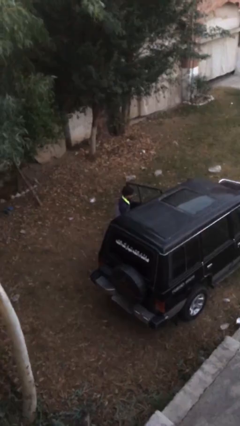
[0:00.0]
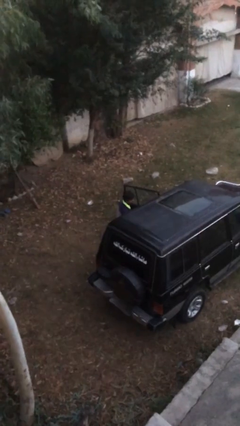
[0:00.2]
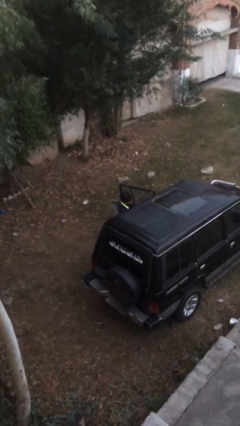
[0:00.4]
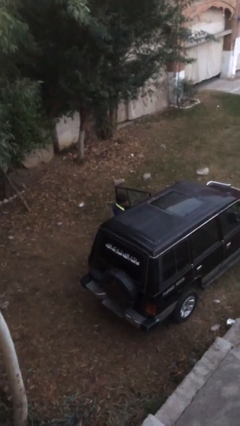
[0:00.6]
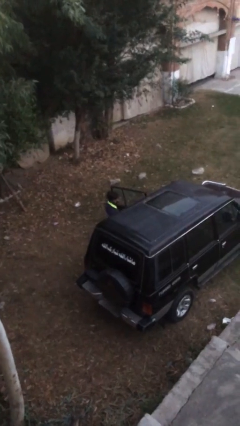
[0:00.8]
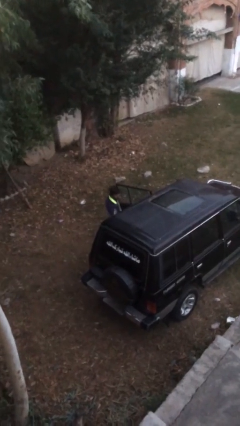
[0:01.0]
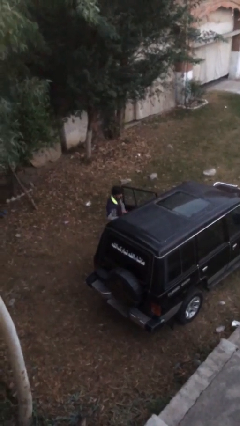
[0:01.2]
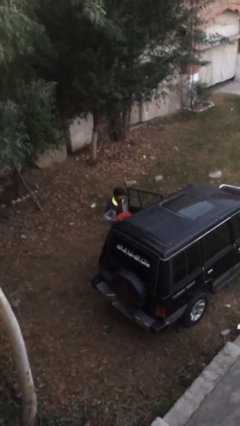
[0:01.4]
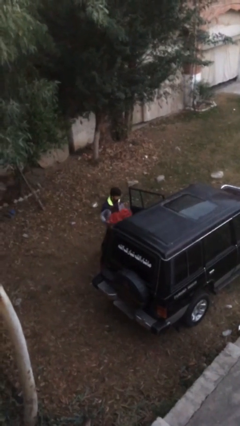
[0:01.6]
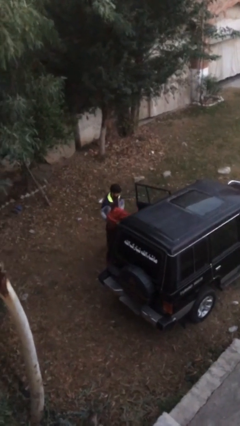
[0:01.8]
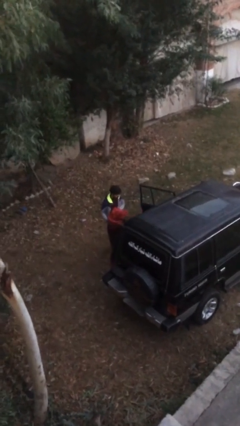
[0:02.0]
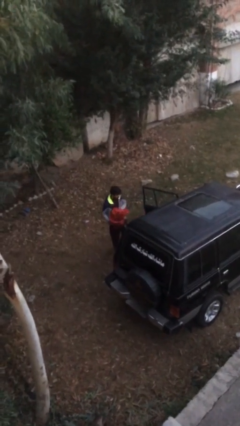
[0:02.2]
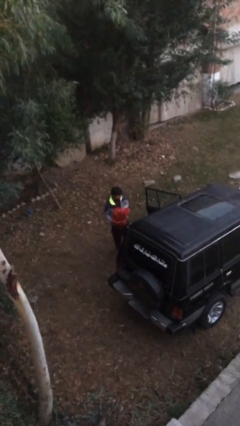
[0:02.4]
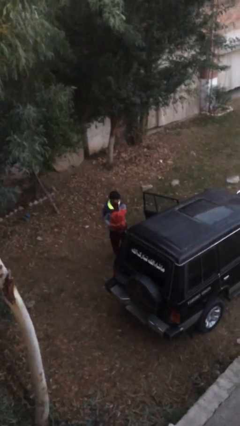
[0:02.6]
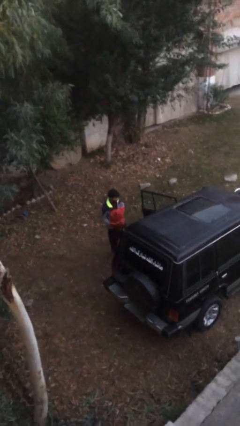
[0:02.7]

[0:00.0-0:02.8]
person unloads car

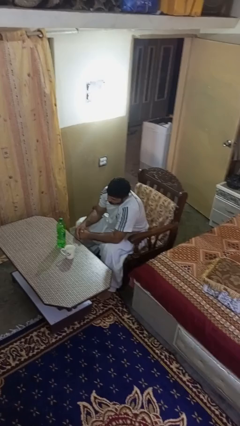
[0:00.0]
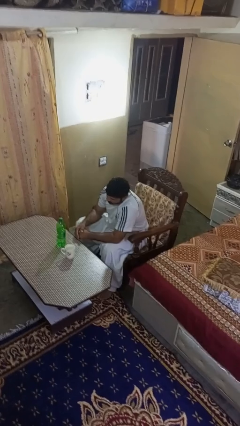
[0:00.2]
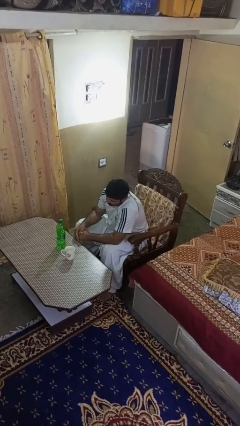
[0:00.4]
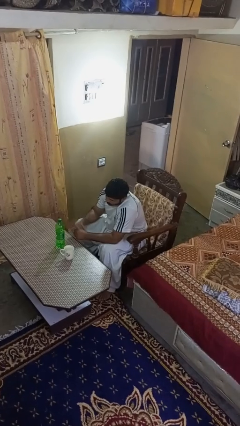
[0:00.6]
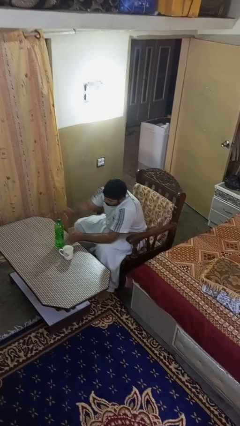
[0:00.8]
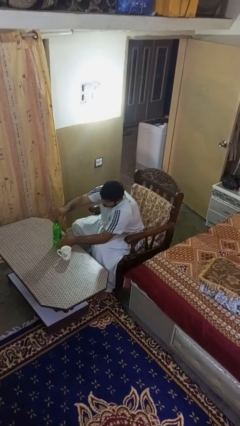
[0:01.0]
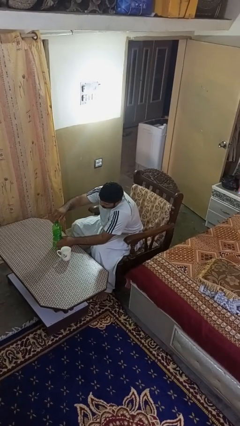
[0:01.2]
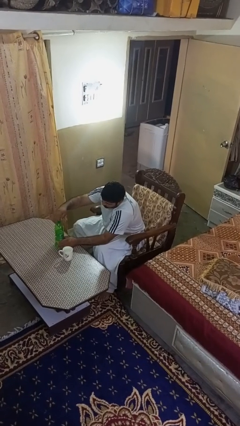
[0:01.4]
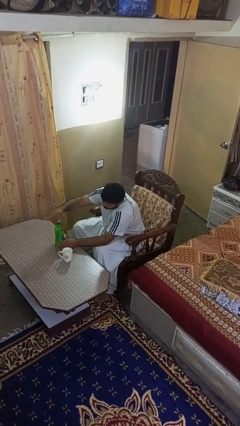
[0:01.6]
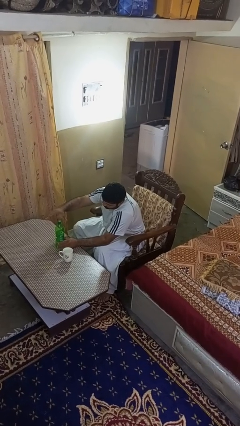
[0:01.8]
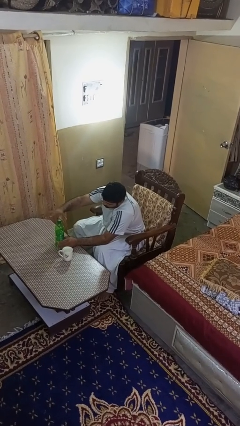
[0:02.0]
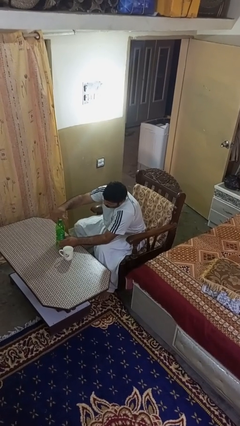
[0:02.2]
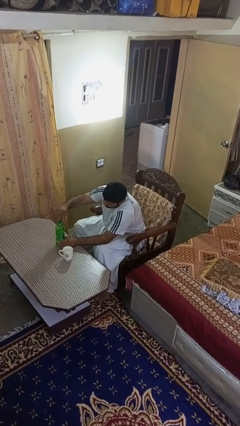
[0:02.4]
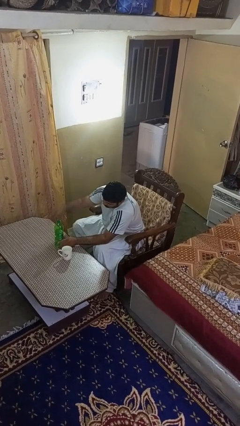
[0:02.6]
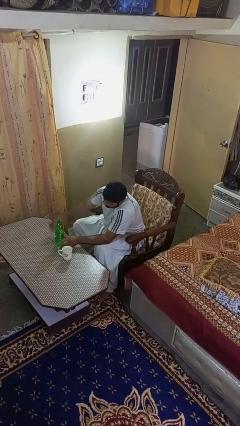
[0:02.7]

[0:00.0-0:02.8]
person unscrews lid from bottle

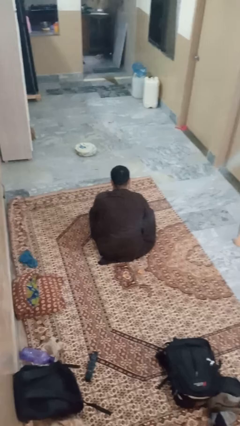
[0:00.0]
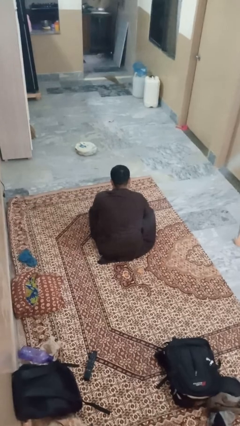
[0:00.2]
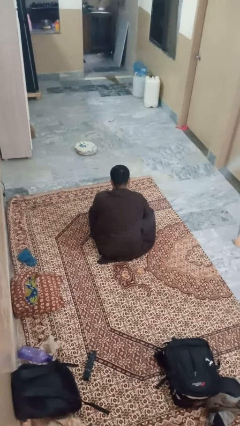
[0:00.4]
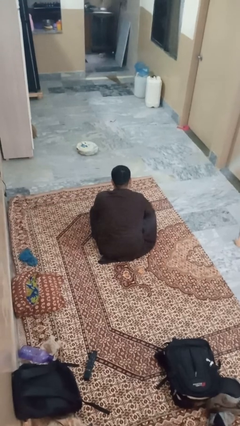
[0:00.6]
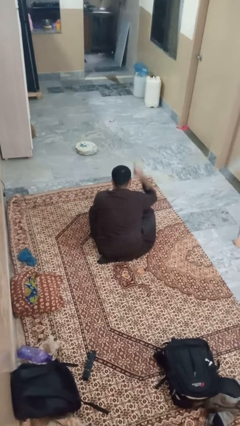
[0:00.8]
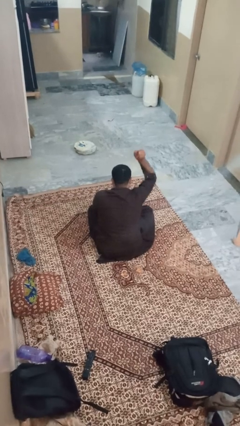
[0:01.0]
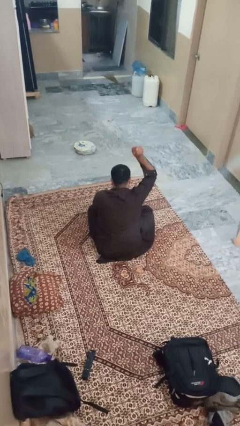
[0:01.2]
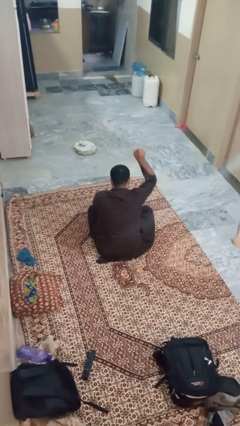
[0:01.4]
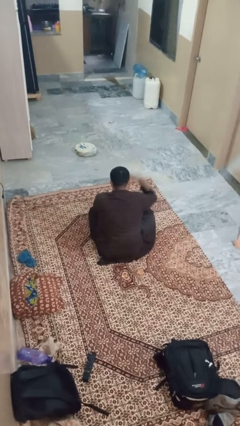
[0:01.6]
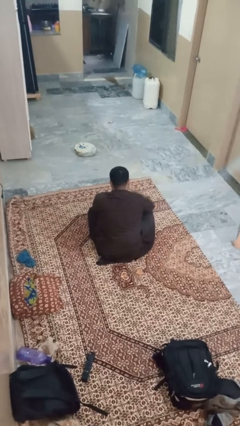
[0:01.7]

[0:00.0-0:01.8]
person gestures number one

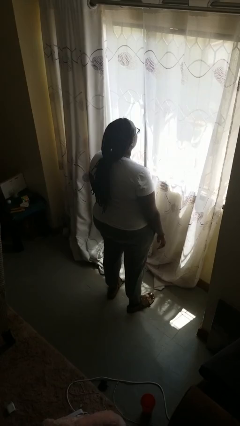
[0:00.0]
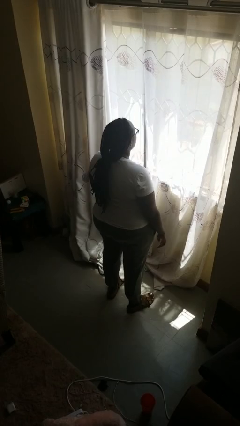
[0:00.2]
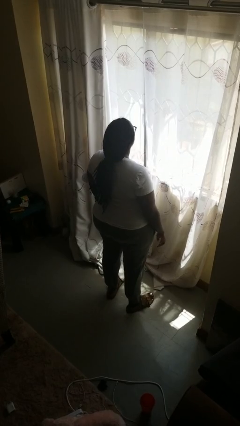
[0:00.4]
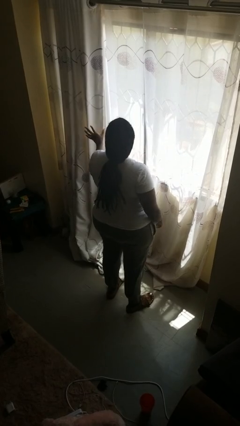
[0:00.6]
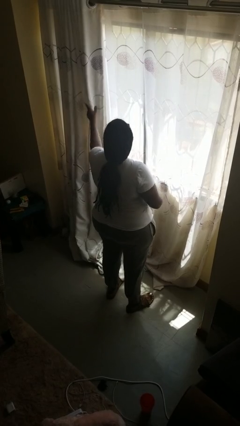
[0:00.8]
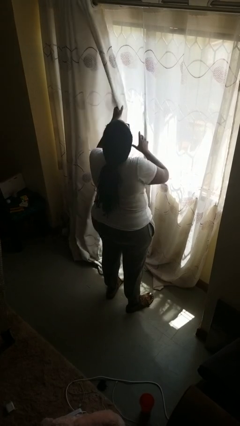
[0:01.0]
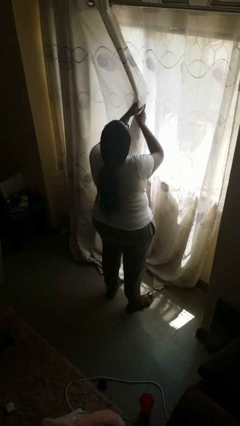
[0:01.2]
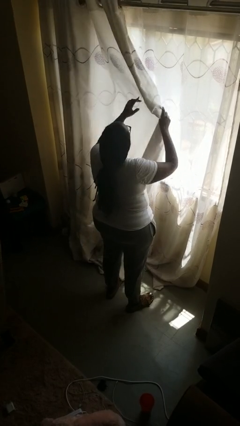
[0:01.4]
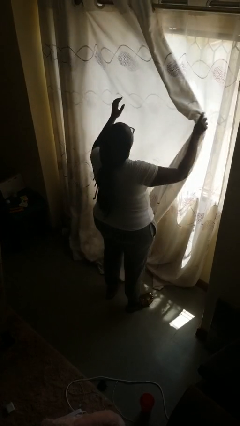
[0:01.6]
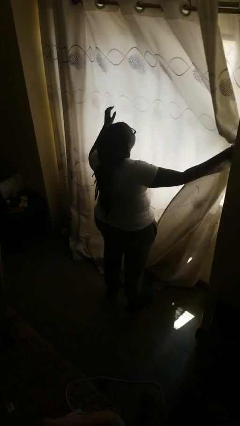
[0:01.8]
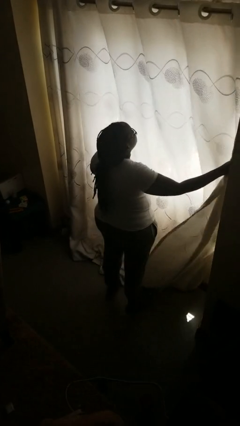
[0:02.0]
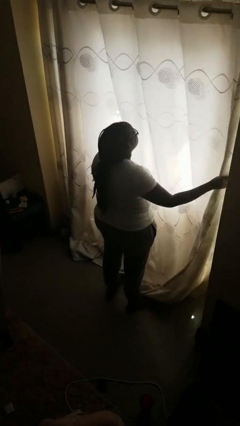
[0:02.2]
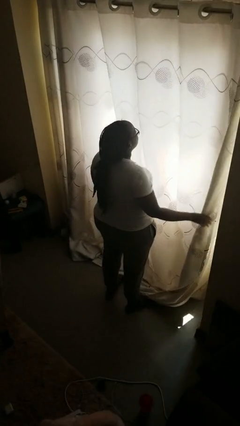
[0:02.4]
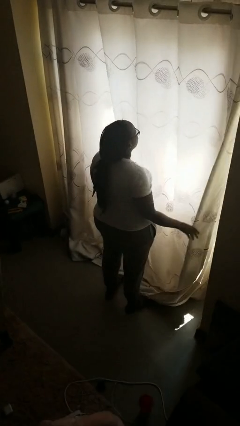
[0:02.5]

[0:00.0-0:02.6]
person closes curtains

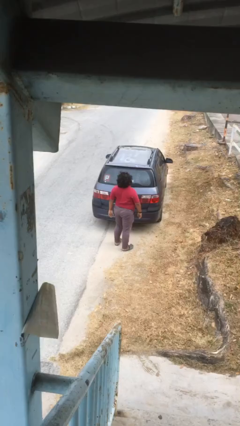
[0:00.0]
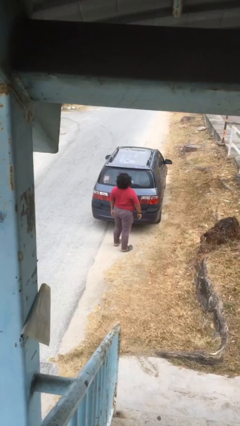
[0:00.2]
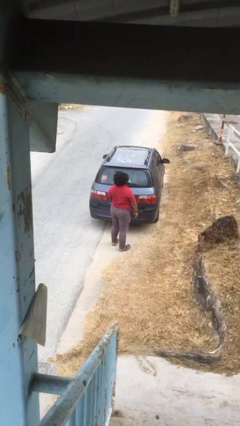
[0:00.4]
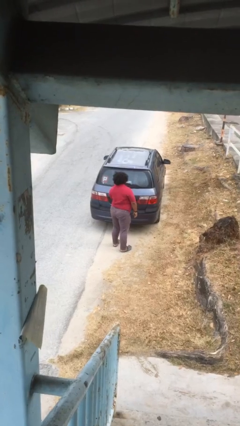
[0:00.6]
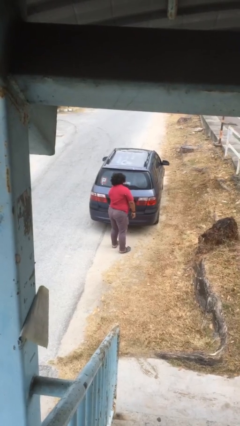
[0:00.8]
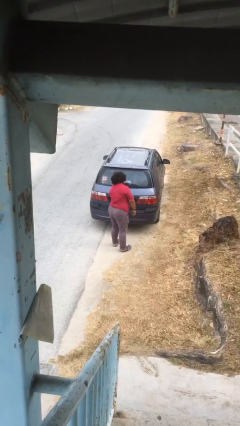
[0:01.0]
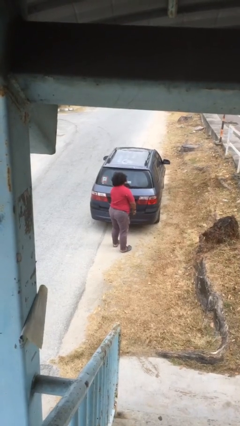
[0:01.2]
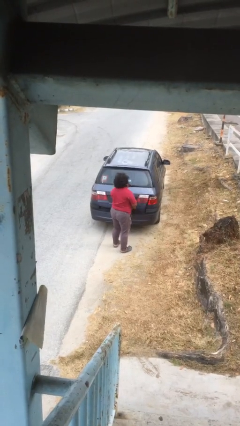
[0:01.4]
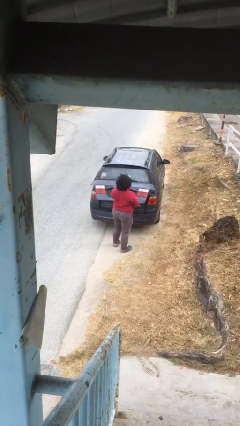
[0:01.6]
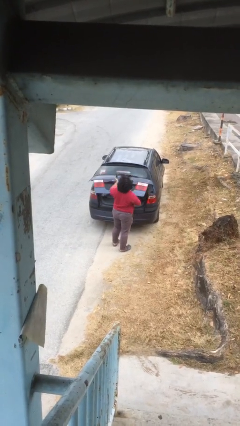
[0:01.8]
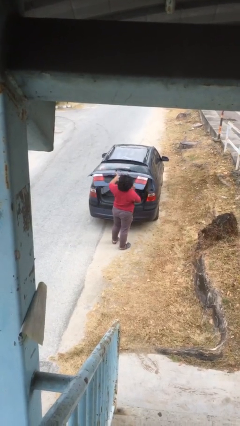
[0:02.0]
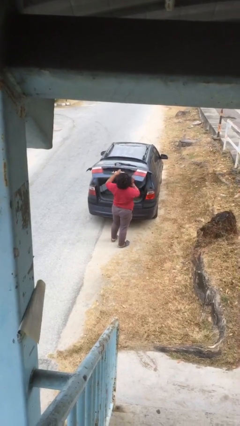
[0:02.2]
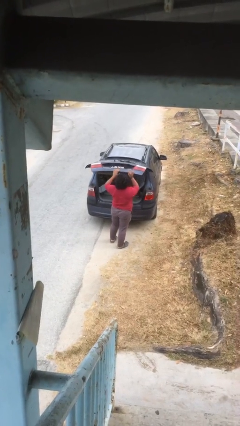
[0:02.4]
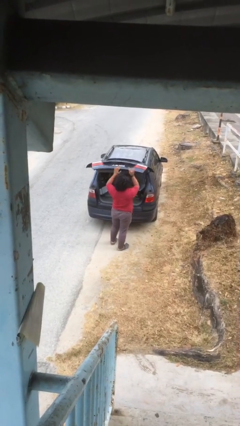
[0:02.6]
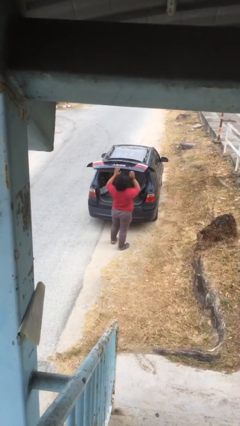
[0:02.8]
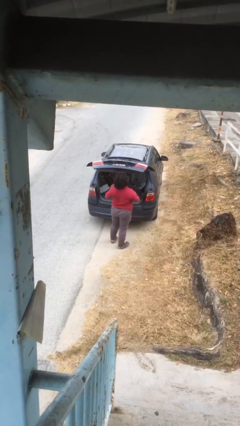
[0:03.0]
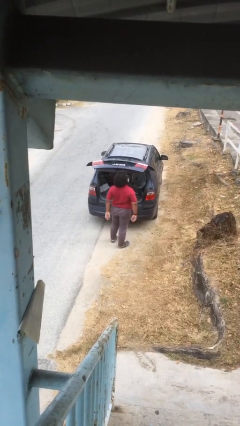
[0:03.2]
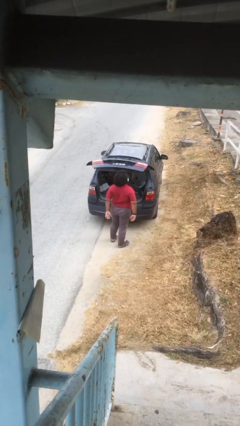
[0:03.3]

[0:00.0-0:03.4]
person opens car trunk

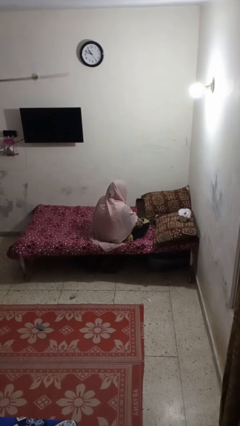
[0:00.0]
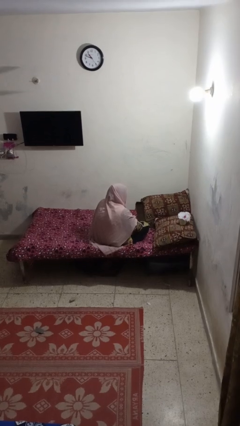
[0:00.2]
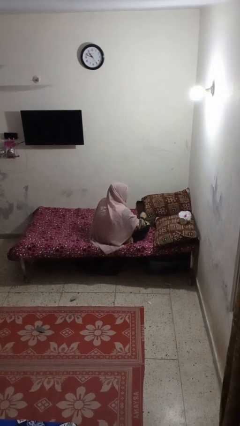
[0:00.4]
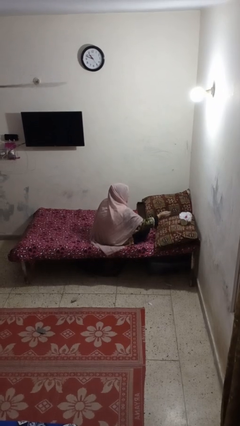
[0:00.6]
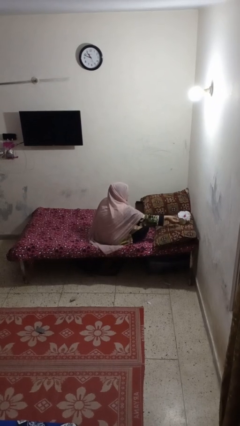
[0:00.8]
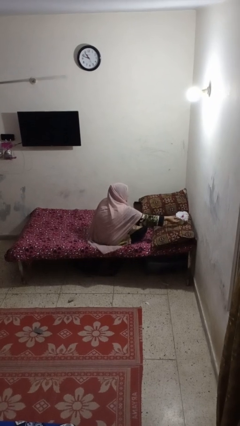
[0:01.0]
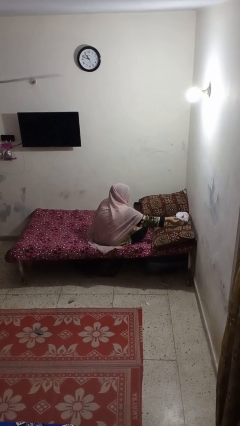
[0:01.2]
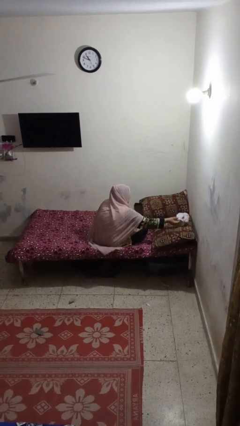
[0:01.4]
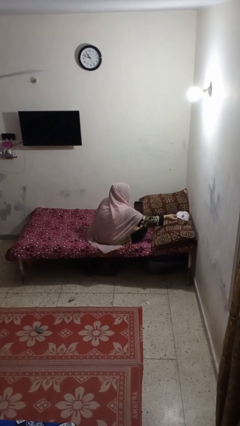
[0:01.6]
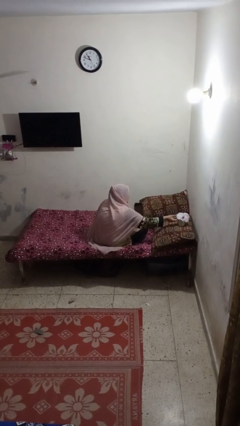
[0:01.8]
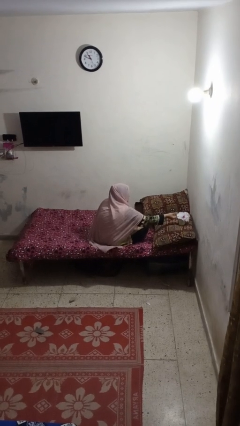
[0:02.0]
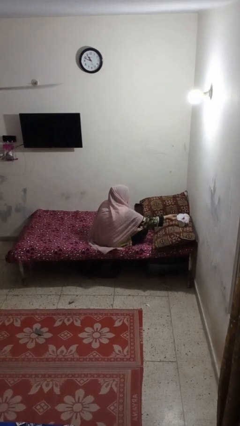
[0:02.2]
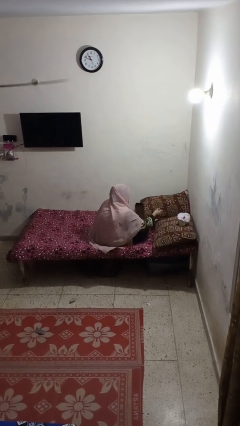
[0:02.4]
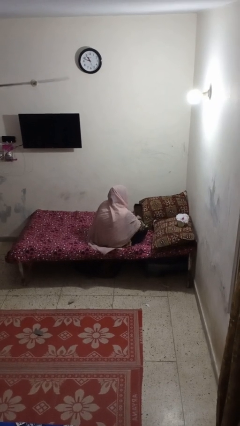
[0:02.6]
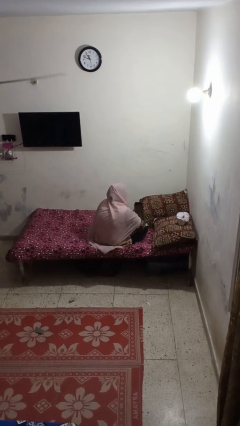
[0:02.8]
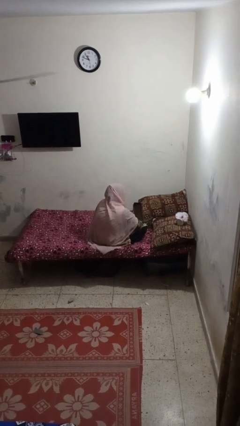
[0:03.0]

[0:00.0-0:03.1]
person arranges flowers in vase

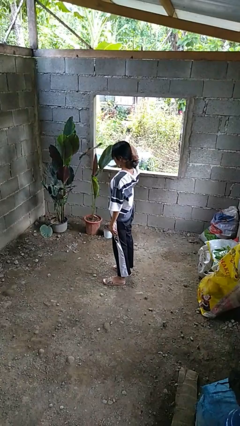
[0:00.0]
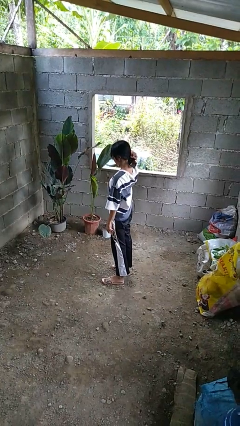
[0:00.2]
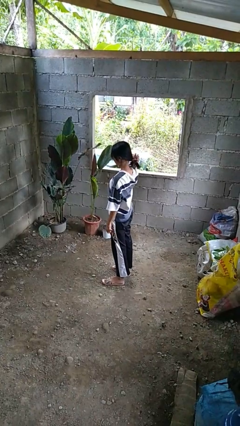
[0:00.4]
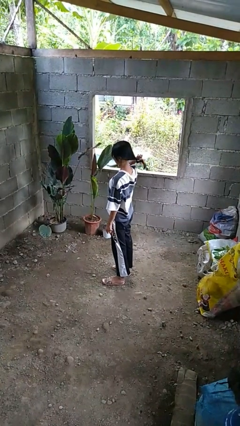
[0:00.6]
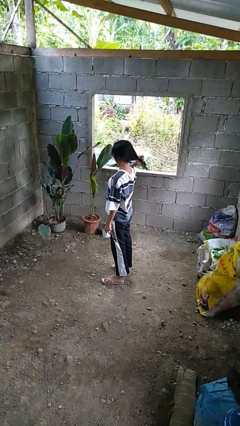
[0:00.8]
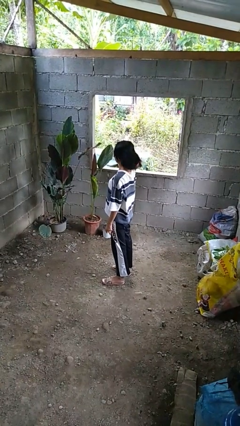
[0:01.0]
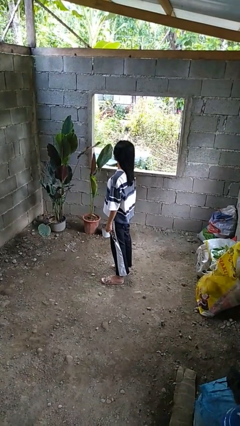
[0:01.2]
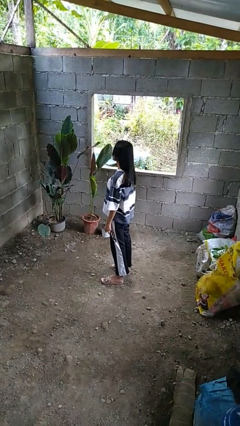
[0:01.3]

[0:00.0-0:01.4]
person takes off hairtie
